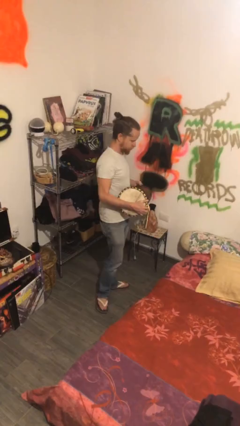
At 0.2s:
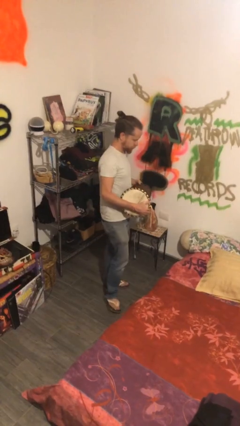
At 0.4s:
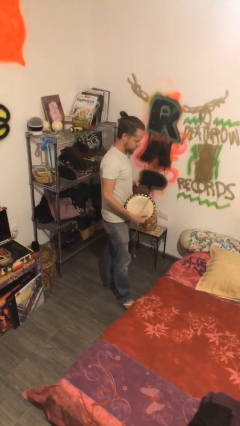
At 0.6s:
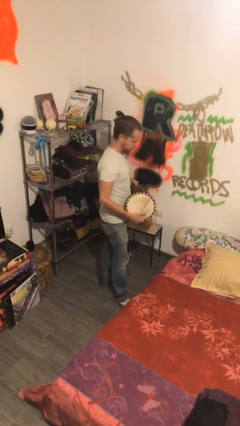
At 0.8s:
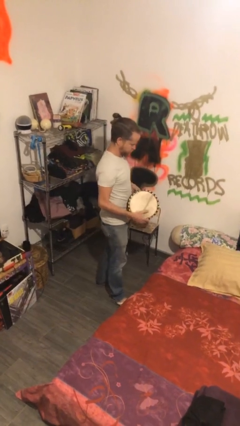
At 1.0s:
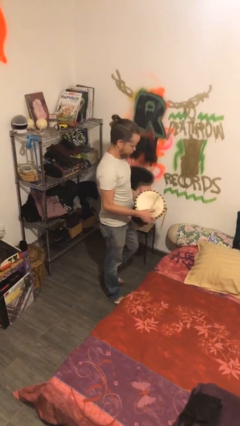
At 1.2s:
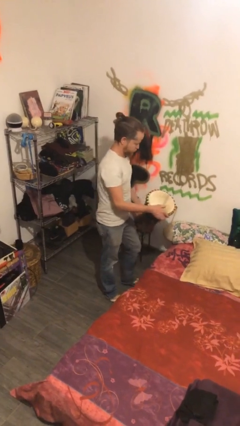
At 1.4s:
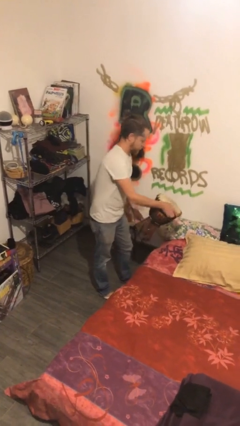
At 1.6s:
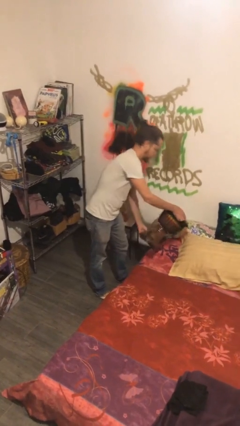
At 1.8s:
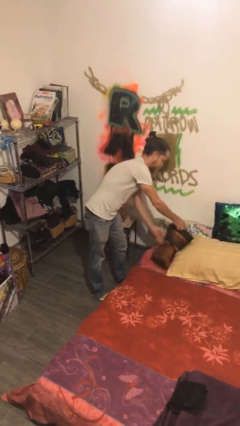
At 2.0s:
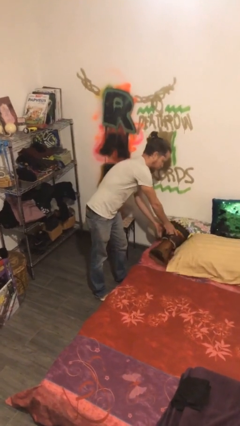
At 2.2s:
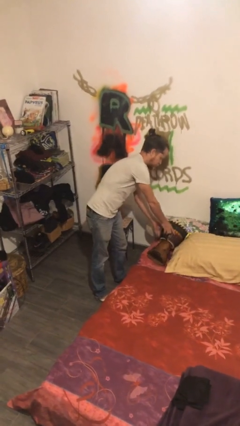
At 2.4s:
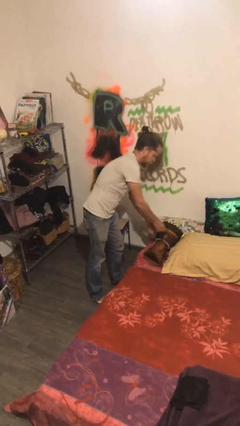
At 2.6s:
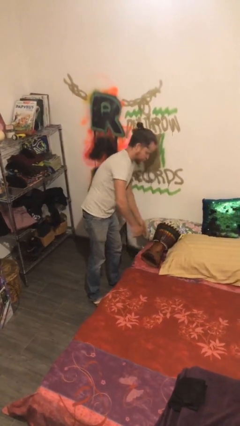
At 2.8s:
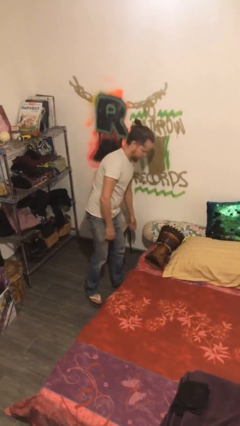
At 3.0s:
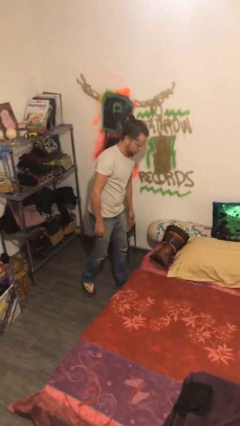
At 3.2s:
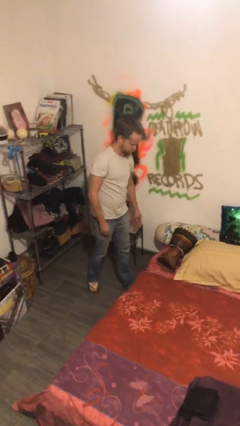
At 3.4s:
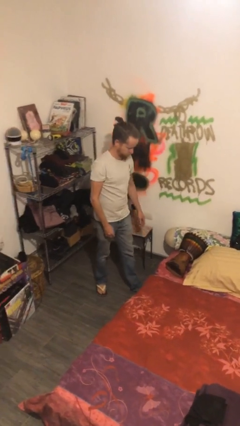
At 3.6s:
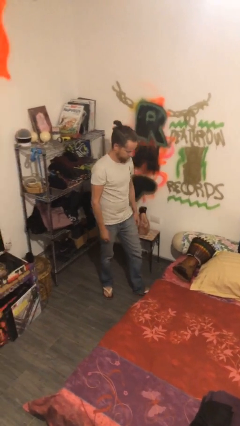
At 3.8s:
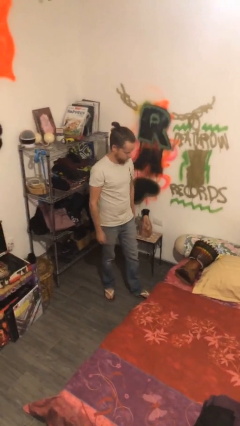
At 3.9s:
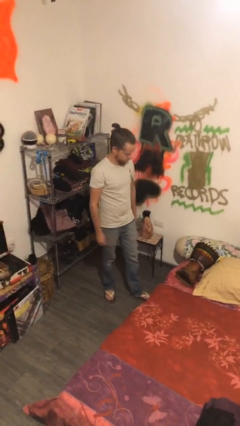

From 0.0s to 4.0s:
person puts down object on bed

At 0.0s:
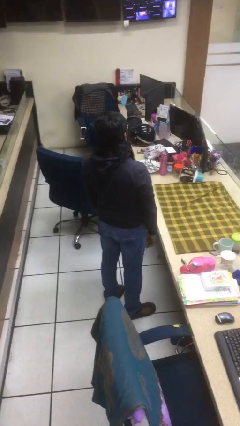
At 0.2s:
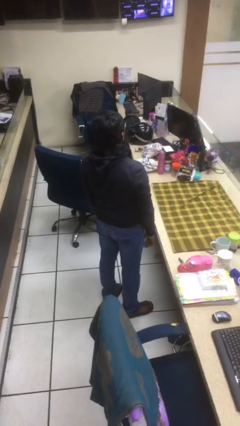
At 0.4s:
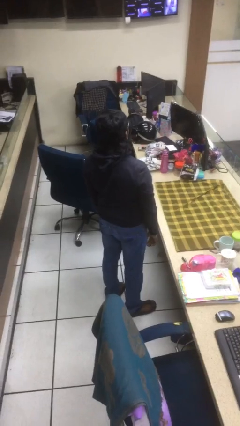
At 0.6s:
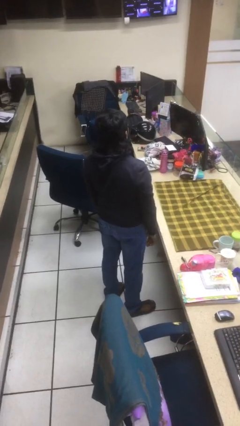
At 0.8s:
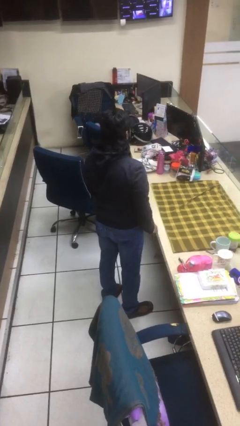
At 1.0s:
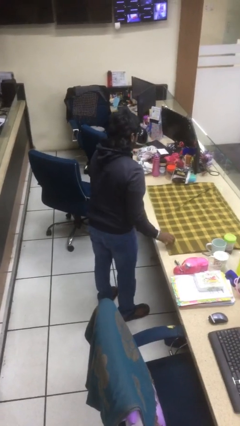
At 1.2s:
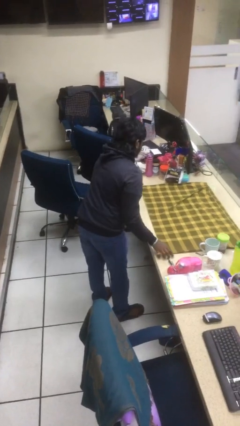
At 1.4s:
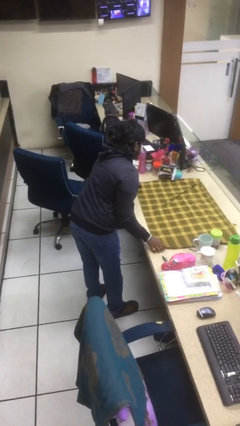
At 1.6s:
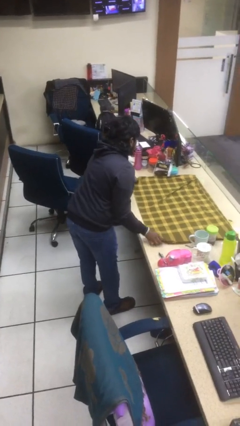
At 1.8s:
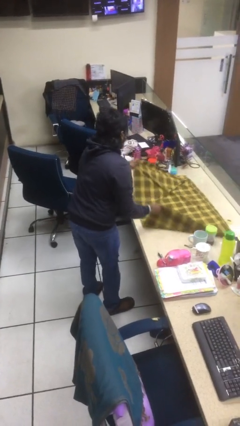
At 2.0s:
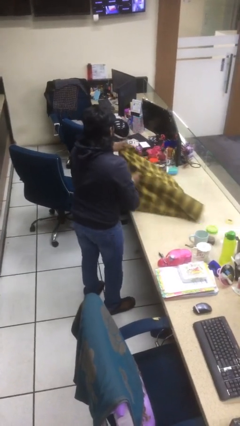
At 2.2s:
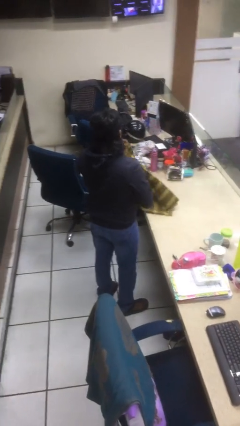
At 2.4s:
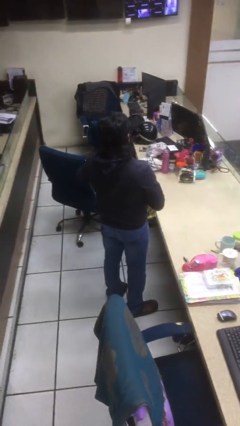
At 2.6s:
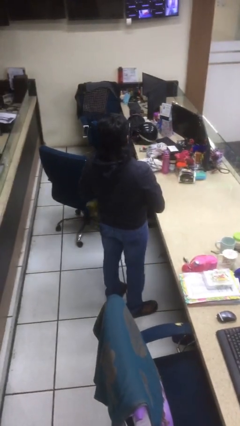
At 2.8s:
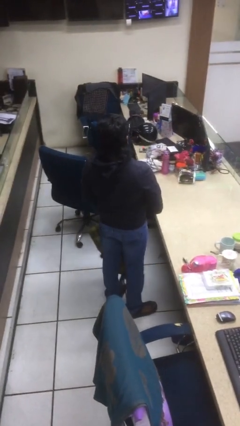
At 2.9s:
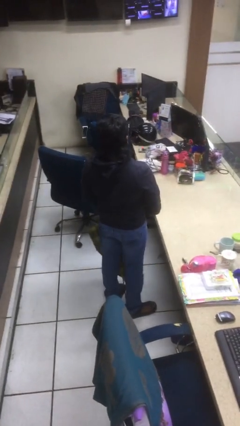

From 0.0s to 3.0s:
person folds tablecloth

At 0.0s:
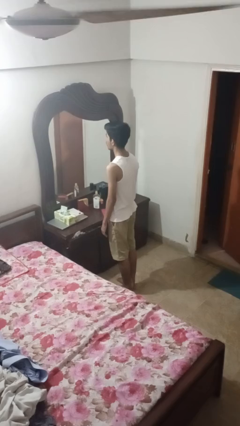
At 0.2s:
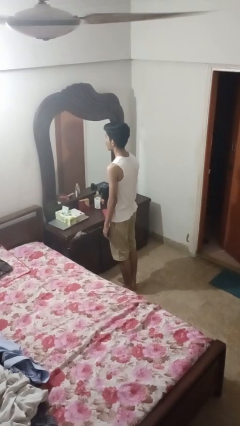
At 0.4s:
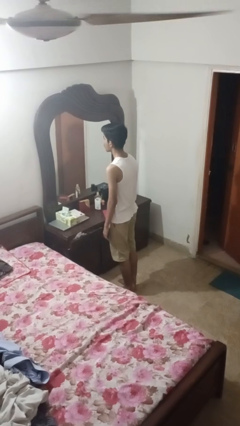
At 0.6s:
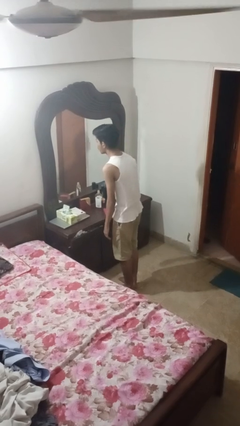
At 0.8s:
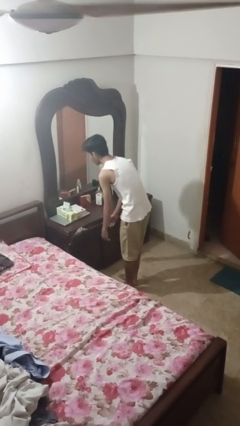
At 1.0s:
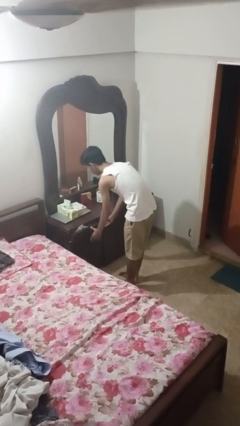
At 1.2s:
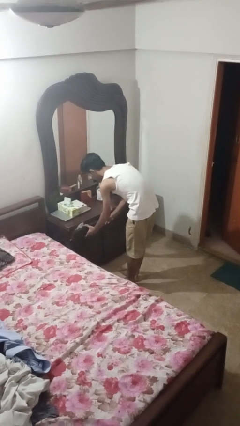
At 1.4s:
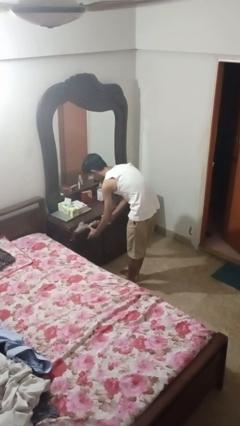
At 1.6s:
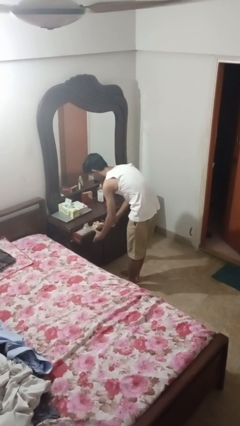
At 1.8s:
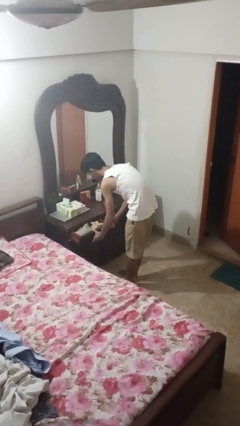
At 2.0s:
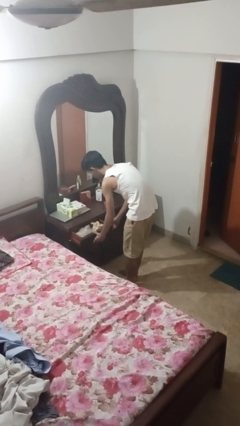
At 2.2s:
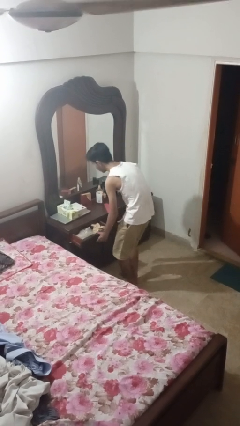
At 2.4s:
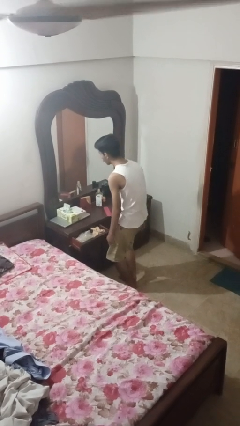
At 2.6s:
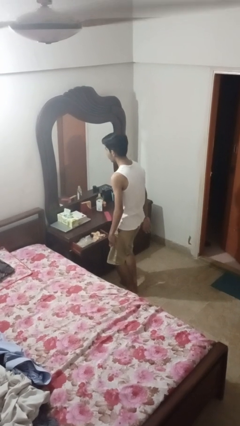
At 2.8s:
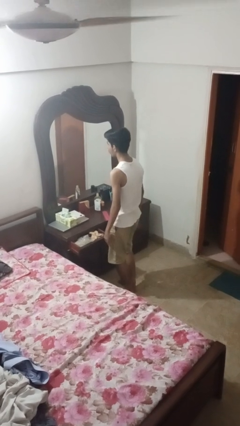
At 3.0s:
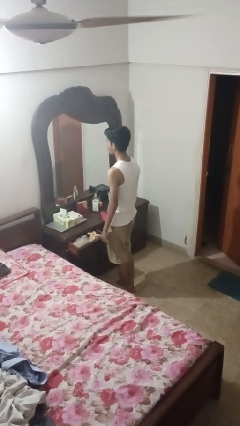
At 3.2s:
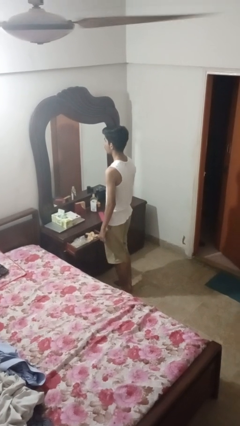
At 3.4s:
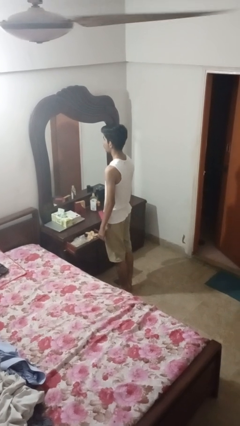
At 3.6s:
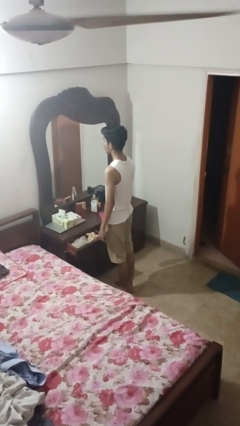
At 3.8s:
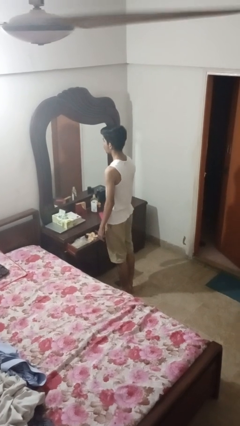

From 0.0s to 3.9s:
person opens dresser drawer

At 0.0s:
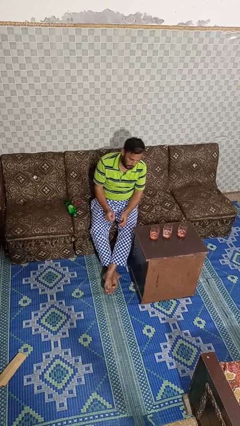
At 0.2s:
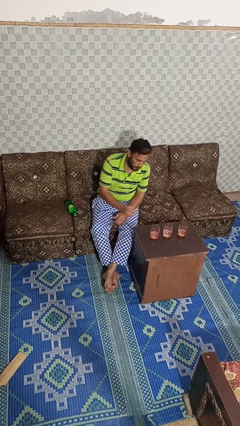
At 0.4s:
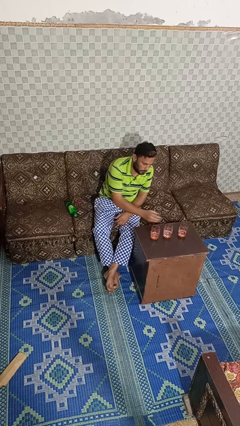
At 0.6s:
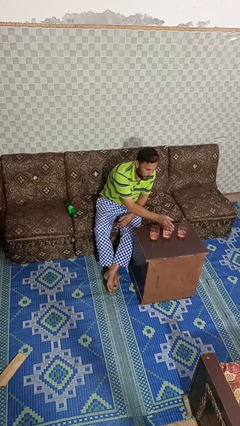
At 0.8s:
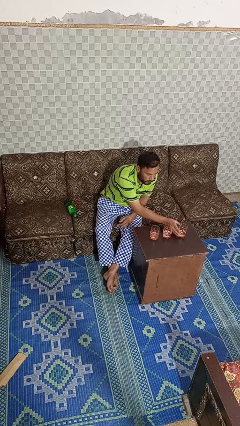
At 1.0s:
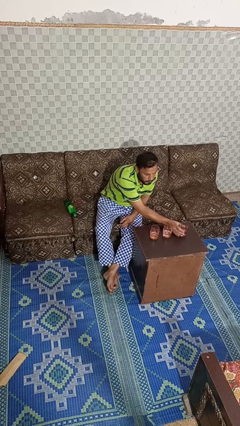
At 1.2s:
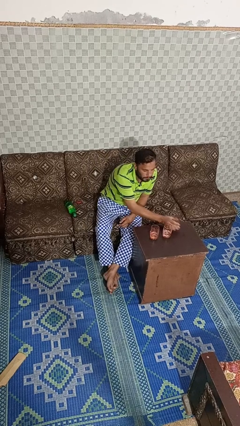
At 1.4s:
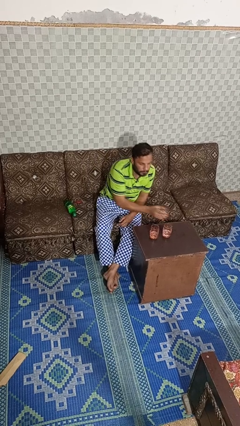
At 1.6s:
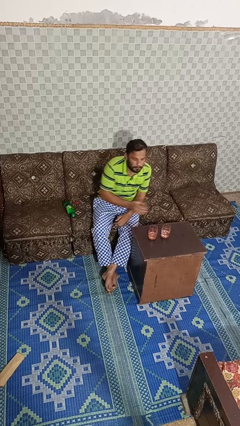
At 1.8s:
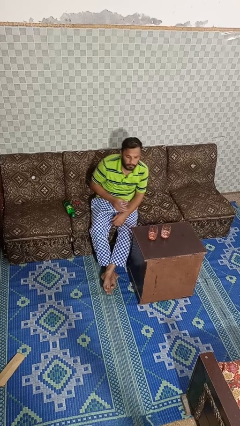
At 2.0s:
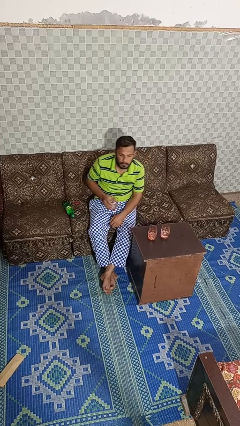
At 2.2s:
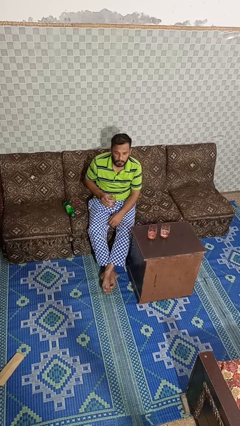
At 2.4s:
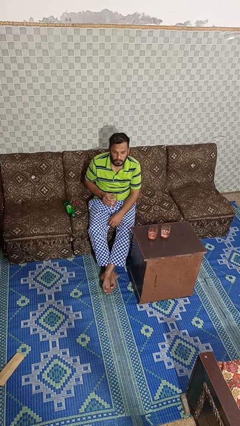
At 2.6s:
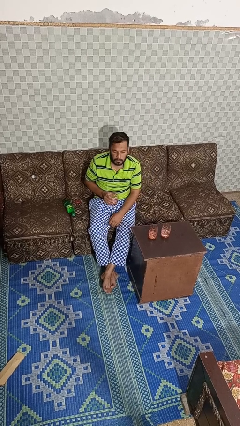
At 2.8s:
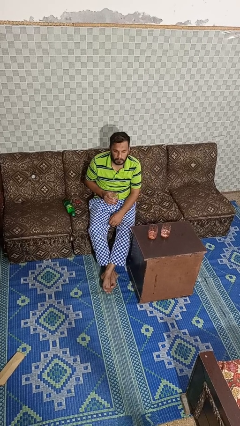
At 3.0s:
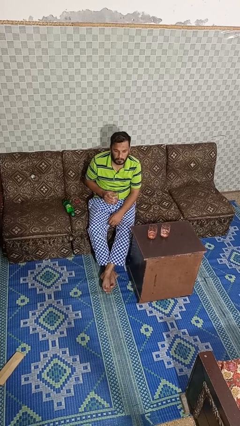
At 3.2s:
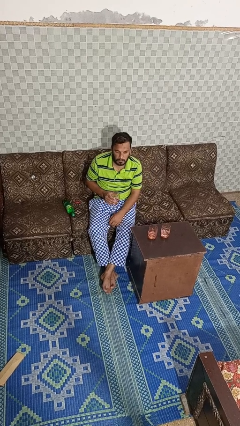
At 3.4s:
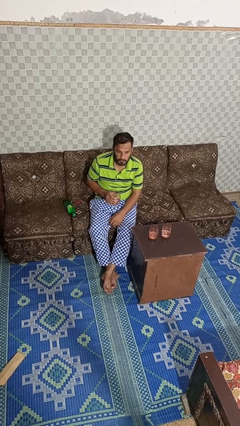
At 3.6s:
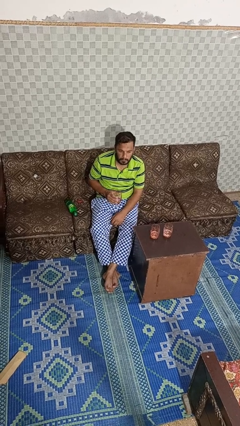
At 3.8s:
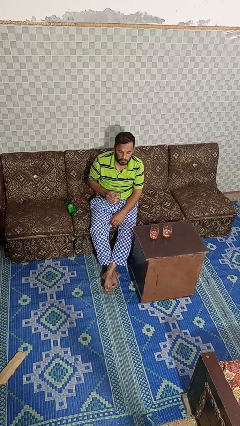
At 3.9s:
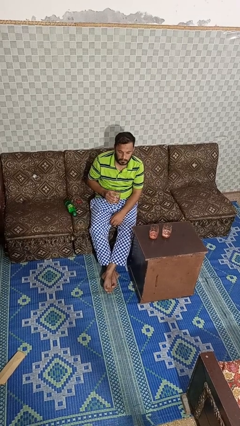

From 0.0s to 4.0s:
person picks up object from table

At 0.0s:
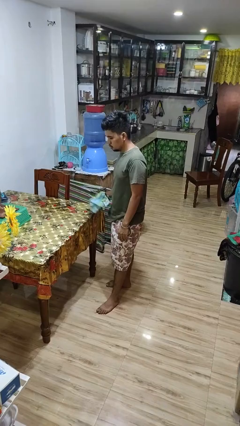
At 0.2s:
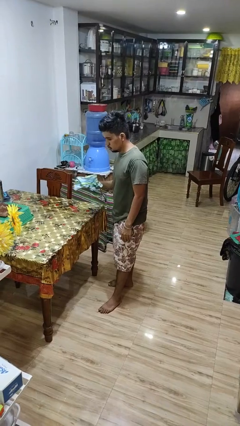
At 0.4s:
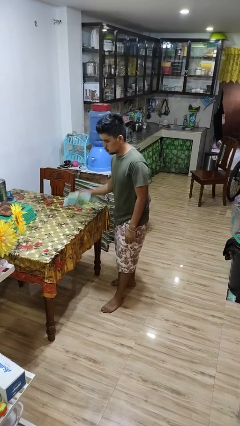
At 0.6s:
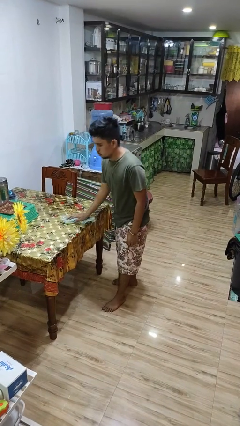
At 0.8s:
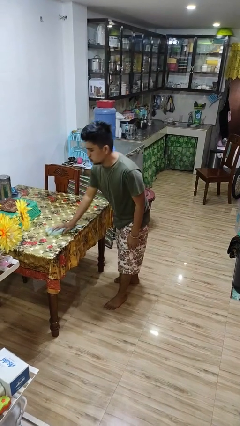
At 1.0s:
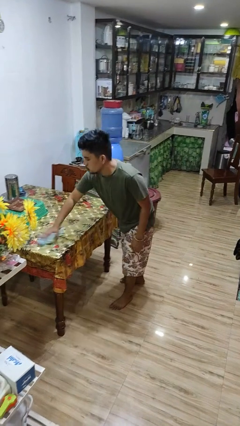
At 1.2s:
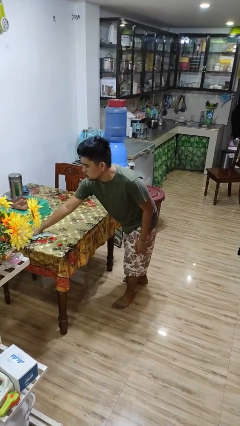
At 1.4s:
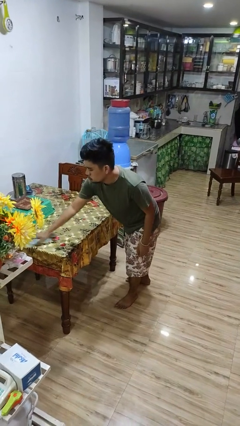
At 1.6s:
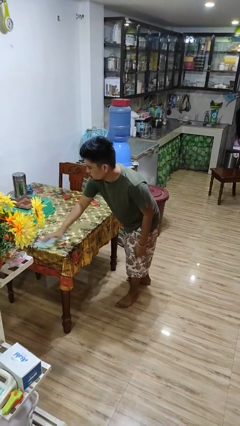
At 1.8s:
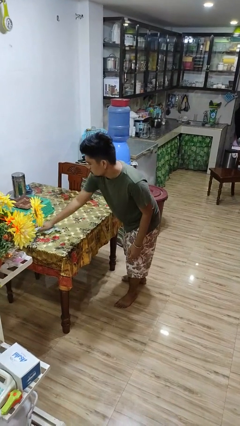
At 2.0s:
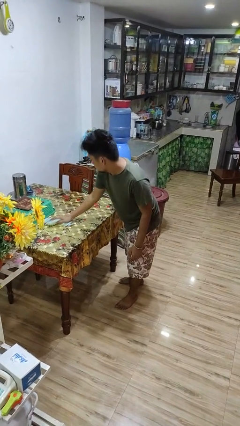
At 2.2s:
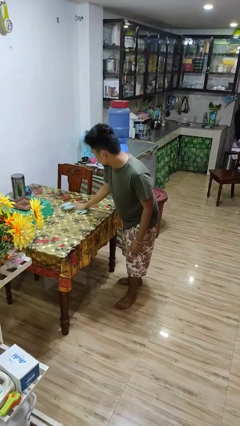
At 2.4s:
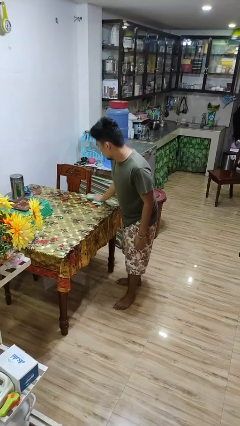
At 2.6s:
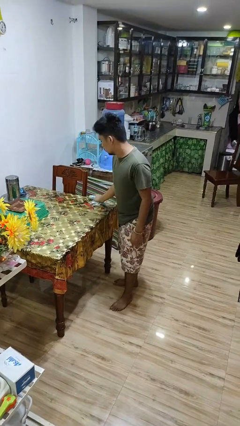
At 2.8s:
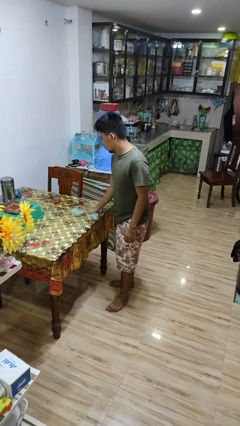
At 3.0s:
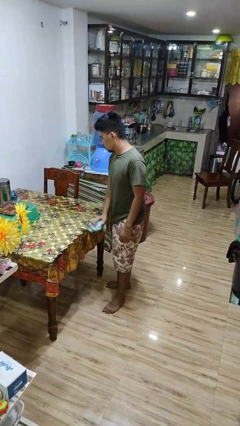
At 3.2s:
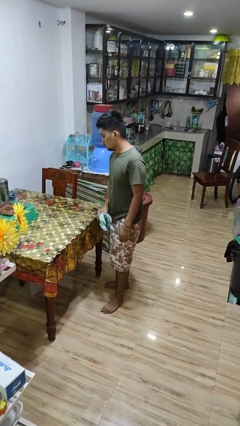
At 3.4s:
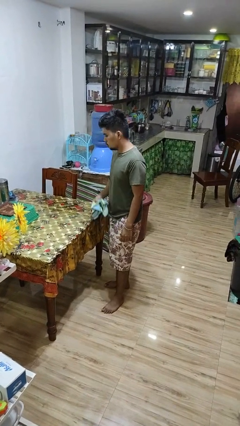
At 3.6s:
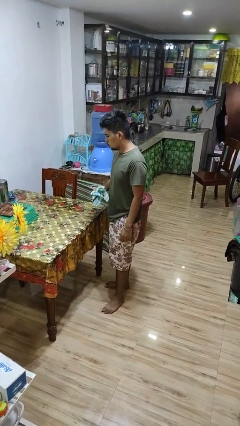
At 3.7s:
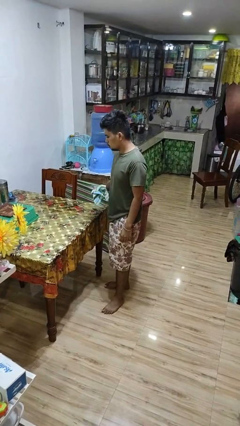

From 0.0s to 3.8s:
person cleans table with rag
